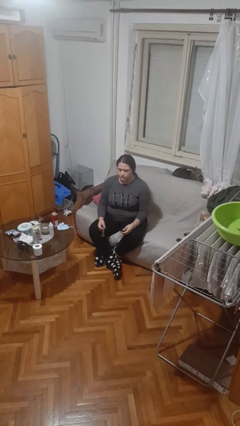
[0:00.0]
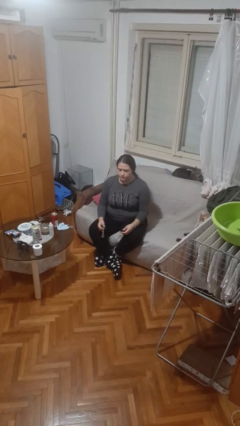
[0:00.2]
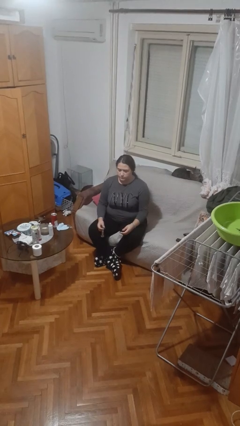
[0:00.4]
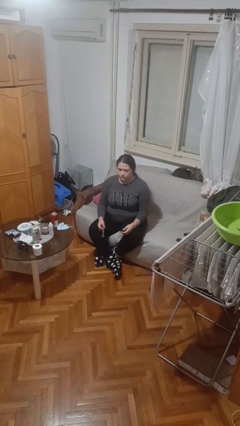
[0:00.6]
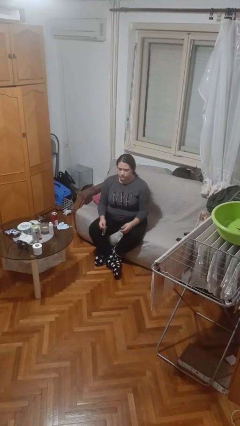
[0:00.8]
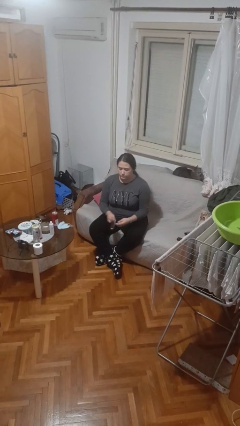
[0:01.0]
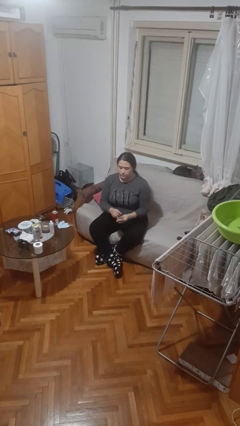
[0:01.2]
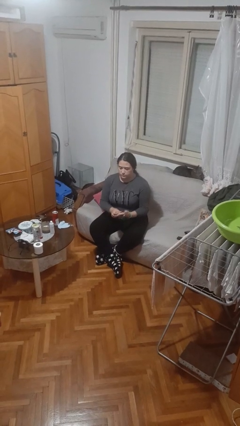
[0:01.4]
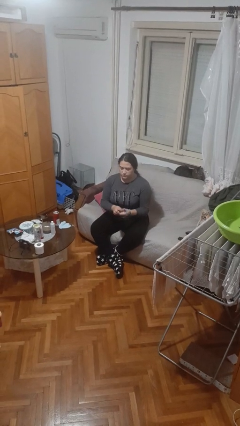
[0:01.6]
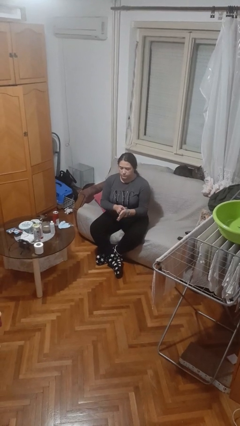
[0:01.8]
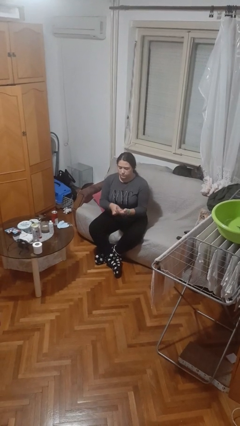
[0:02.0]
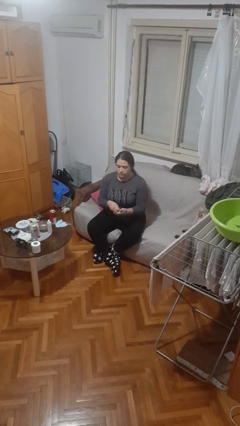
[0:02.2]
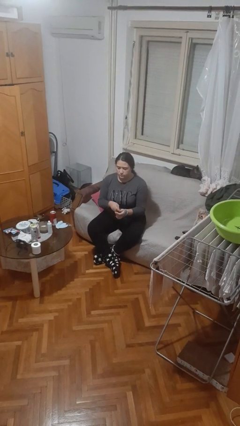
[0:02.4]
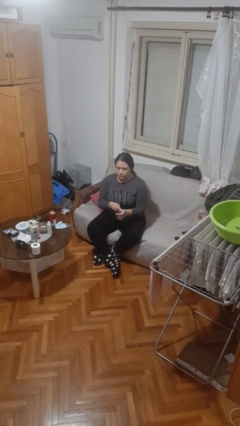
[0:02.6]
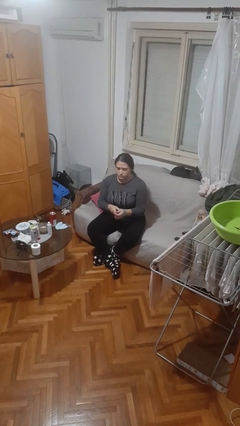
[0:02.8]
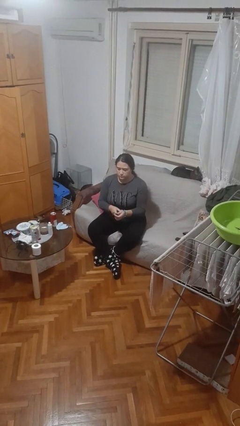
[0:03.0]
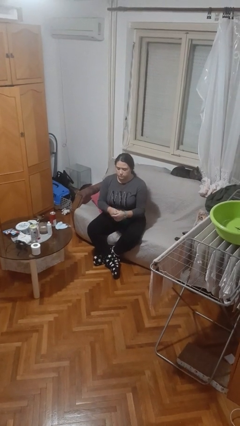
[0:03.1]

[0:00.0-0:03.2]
person puts on wristwatch

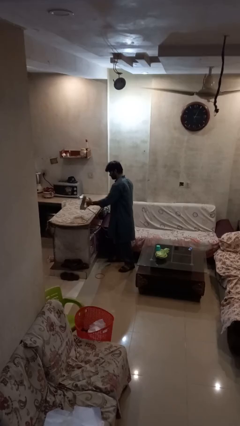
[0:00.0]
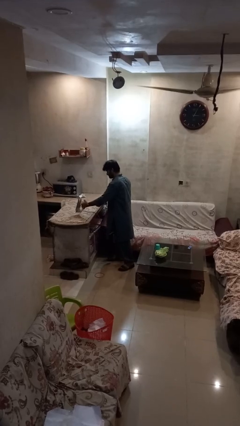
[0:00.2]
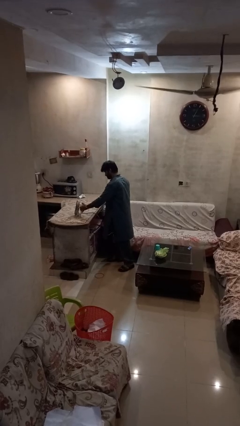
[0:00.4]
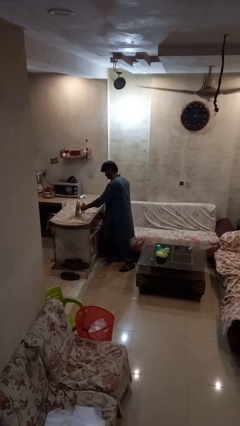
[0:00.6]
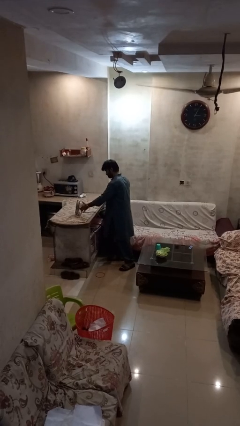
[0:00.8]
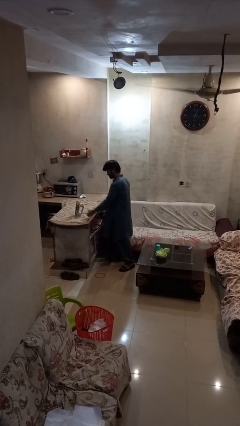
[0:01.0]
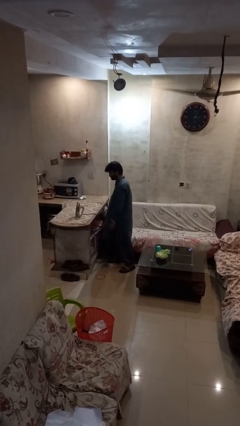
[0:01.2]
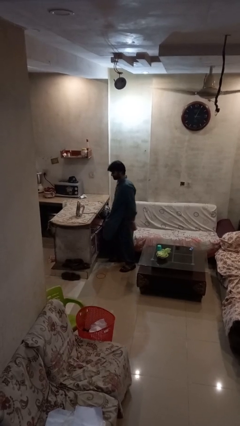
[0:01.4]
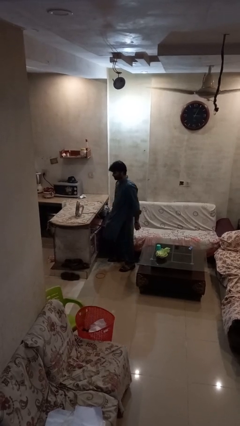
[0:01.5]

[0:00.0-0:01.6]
person puts down object on countertop

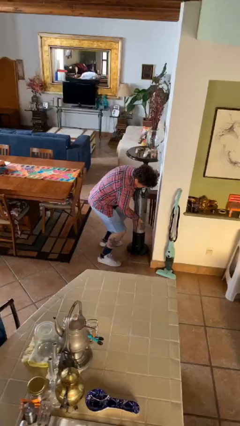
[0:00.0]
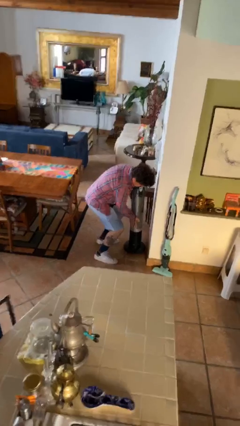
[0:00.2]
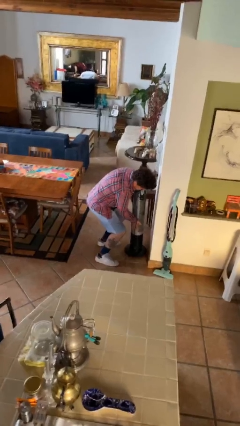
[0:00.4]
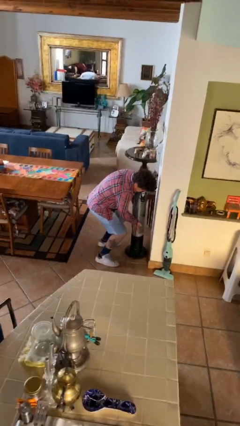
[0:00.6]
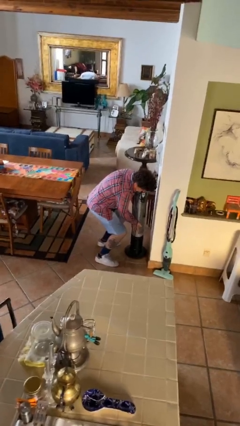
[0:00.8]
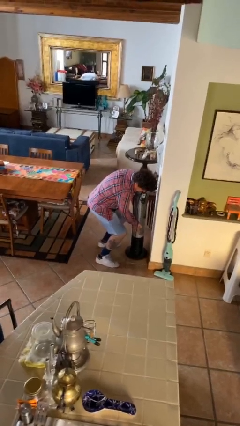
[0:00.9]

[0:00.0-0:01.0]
person puts down object on floor

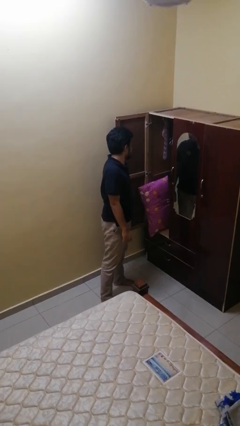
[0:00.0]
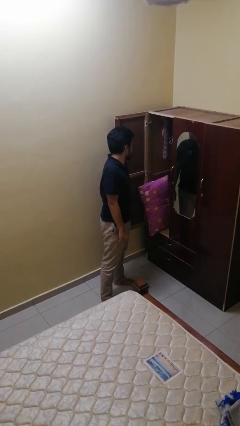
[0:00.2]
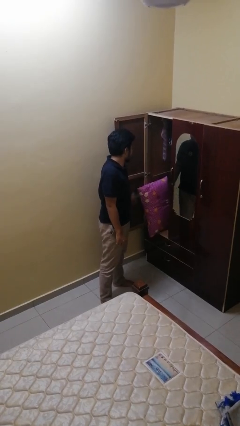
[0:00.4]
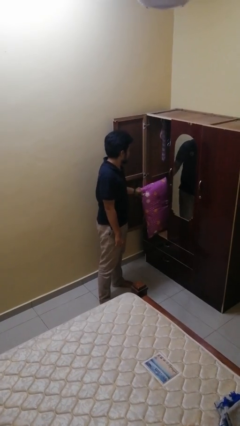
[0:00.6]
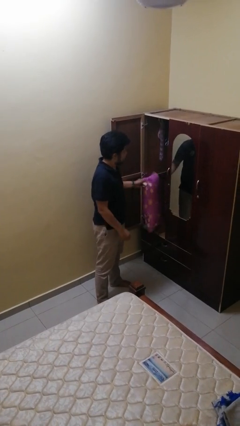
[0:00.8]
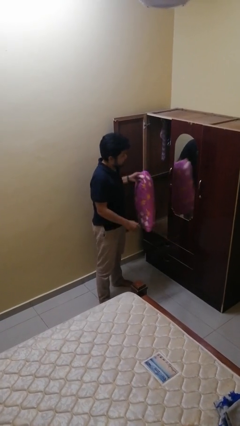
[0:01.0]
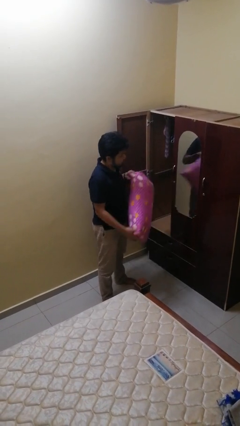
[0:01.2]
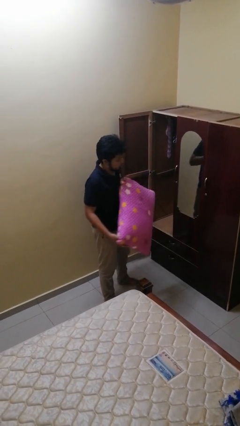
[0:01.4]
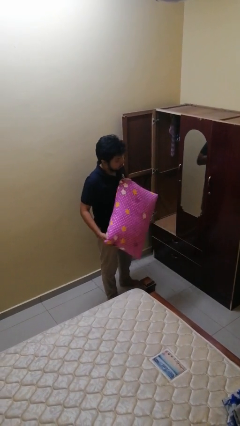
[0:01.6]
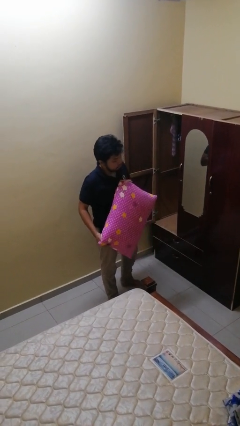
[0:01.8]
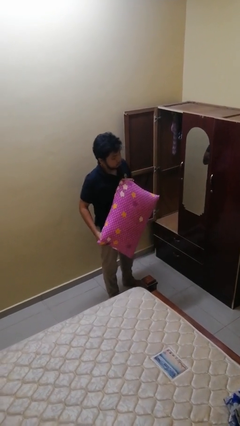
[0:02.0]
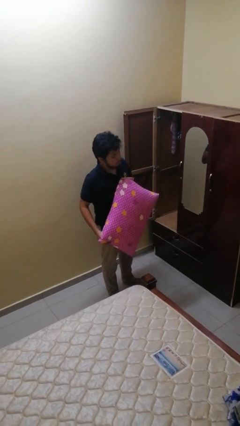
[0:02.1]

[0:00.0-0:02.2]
person picks up object from cabinet

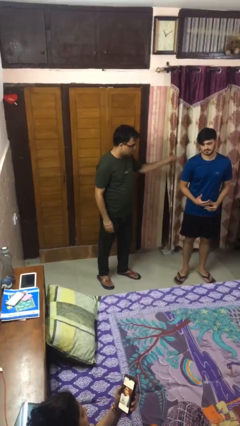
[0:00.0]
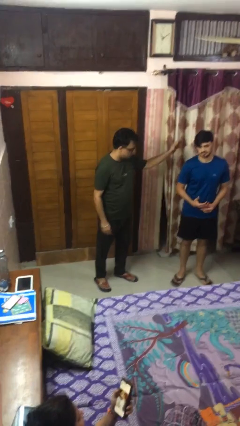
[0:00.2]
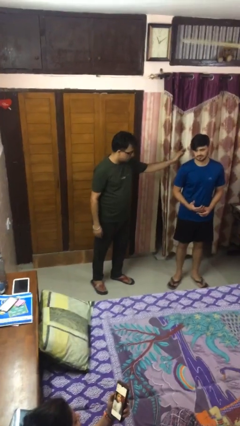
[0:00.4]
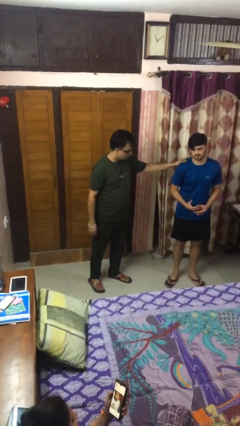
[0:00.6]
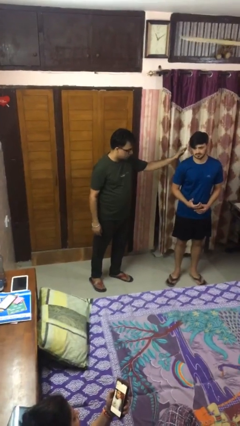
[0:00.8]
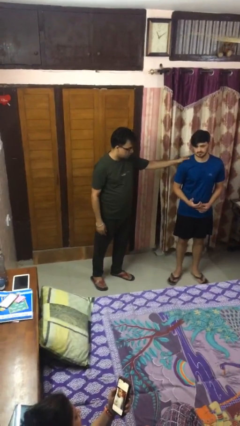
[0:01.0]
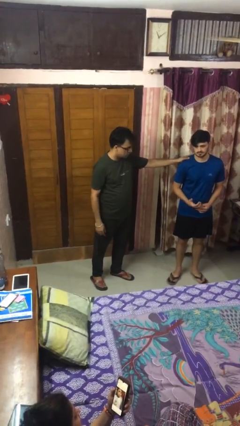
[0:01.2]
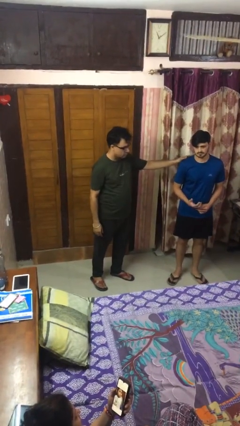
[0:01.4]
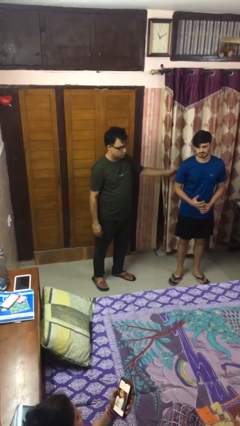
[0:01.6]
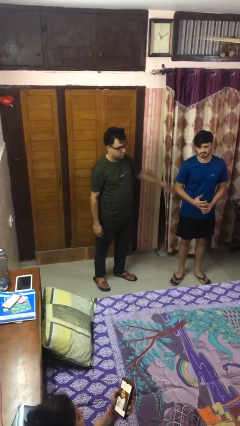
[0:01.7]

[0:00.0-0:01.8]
person pounds shoulders of person

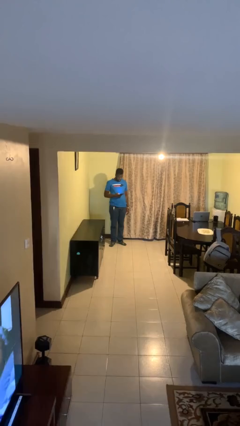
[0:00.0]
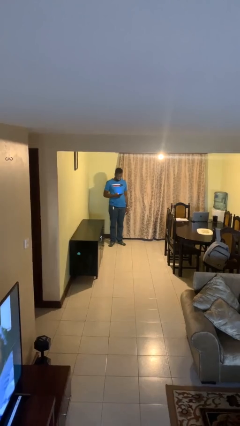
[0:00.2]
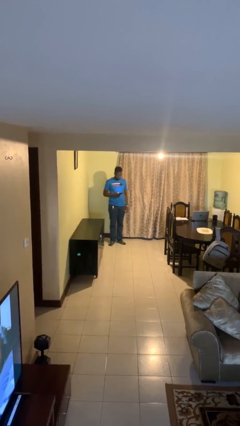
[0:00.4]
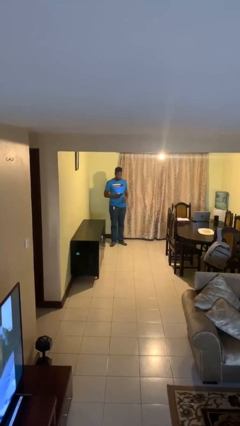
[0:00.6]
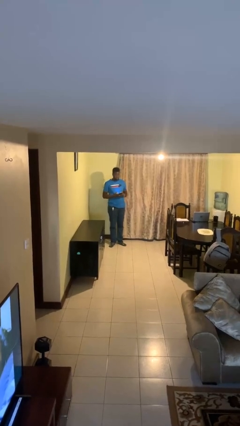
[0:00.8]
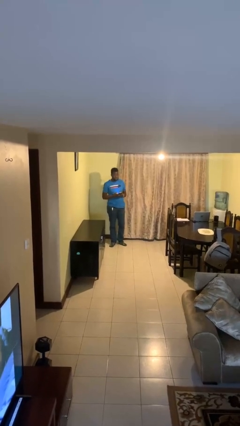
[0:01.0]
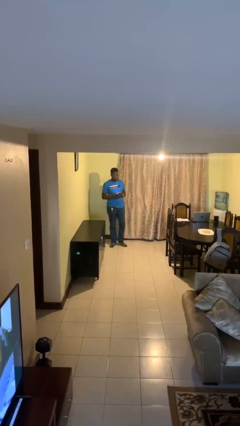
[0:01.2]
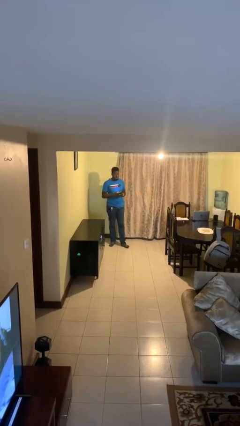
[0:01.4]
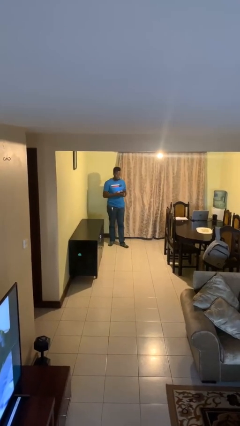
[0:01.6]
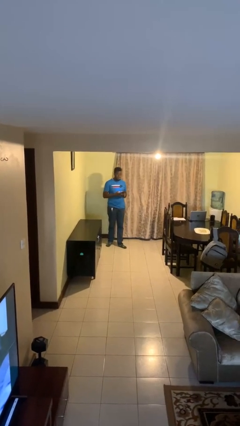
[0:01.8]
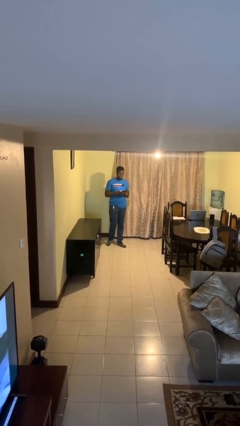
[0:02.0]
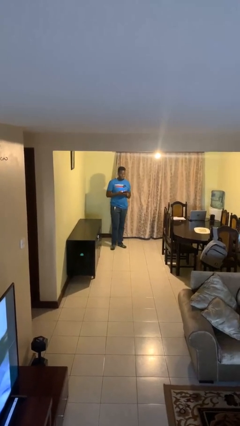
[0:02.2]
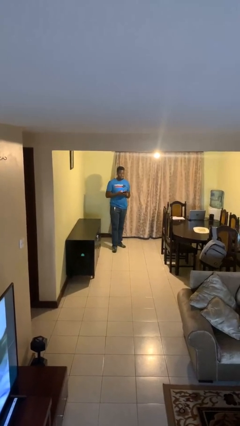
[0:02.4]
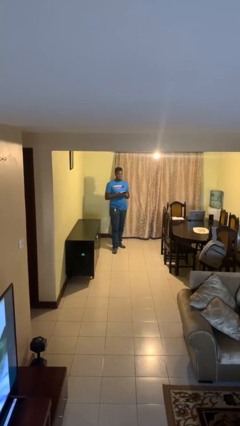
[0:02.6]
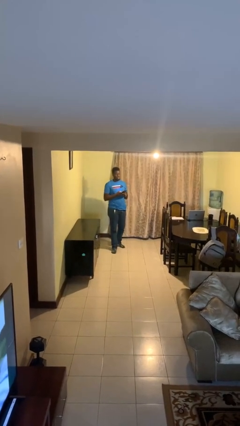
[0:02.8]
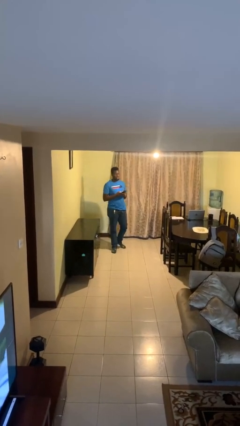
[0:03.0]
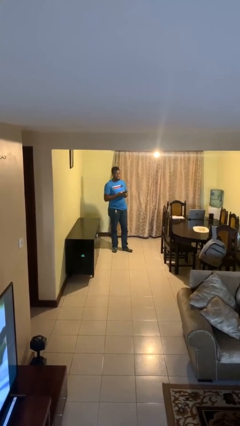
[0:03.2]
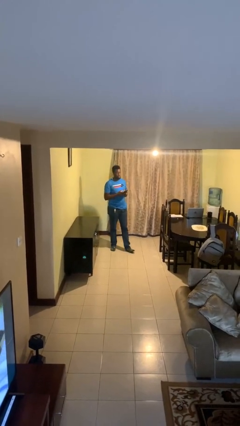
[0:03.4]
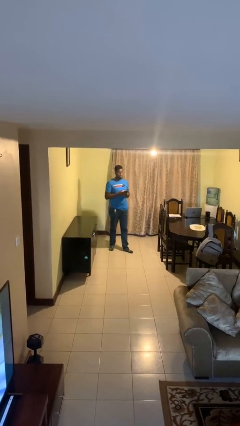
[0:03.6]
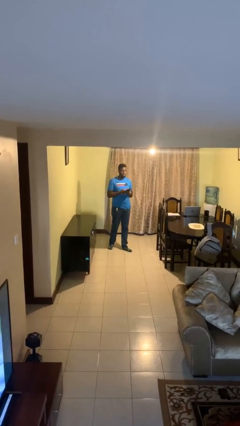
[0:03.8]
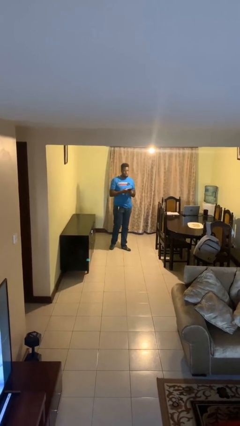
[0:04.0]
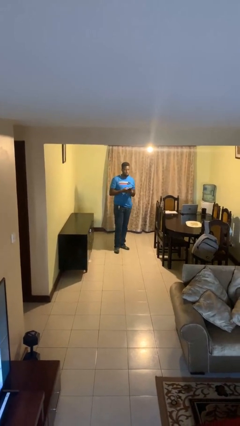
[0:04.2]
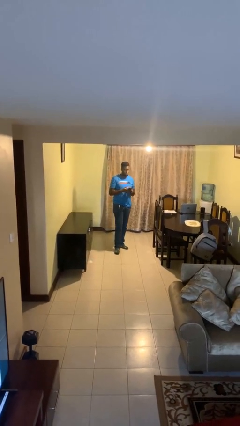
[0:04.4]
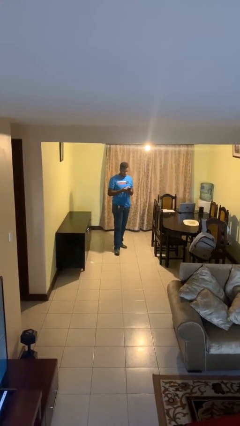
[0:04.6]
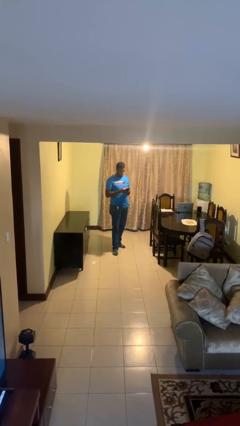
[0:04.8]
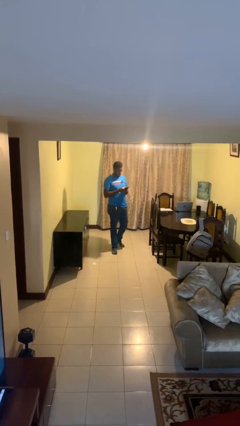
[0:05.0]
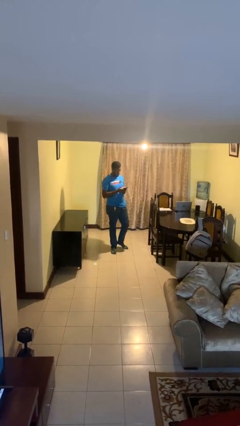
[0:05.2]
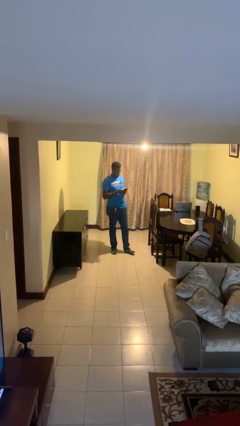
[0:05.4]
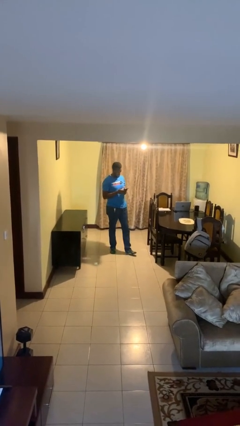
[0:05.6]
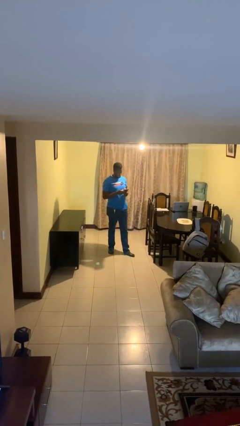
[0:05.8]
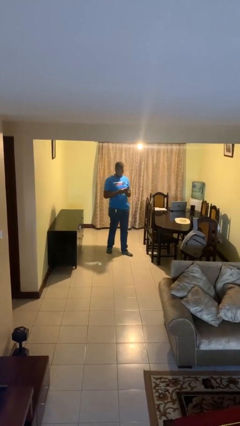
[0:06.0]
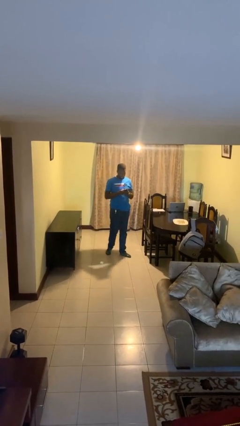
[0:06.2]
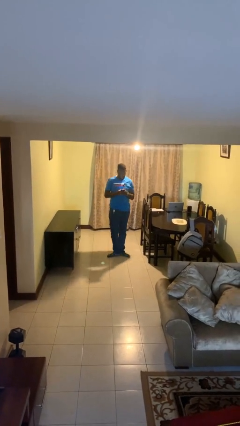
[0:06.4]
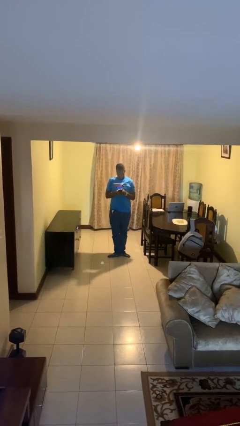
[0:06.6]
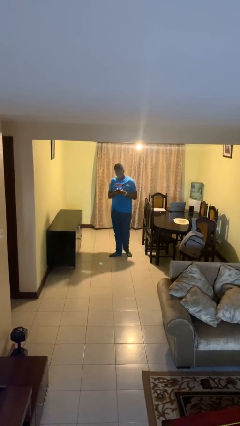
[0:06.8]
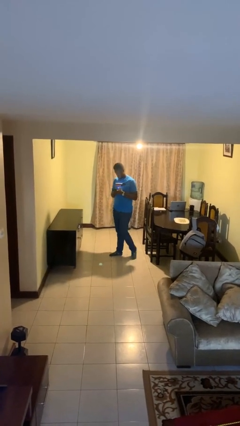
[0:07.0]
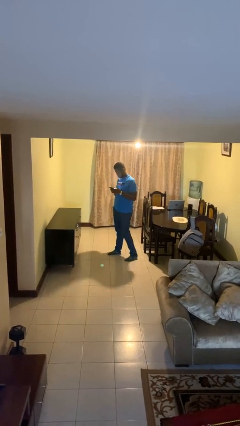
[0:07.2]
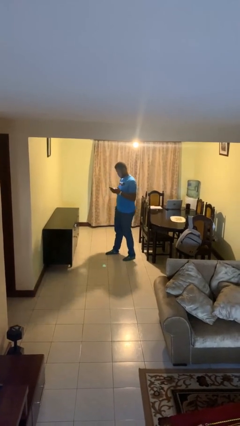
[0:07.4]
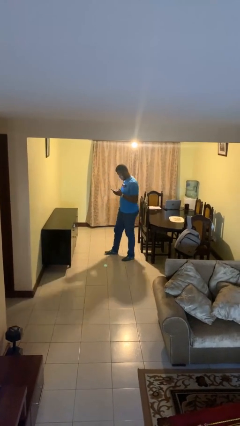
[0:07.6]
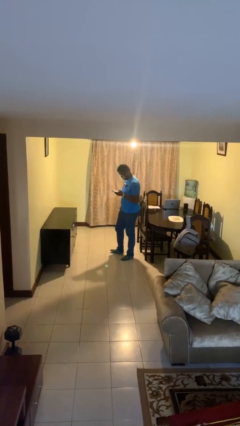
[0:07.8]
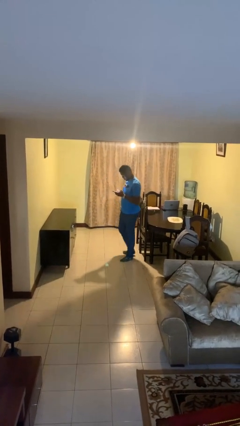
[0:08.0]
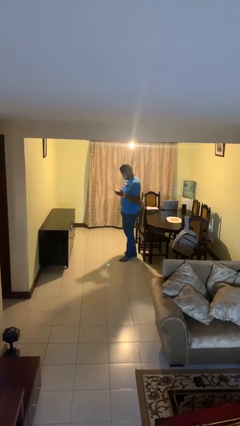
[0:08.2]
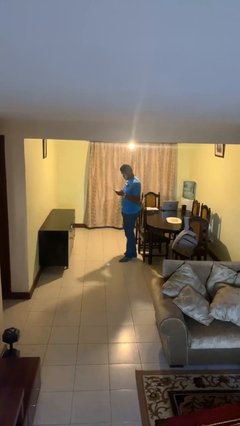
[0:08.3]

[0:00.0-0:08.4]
person texts on phone
